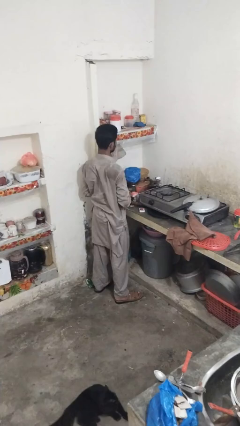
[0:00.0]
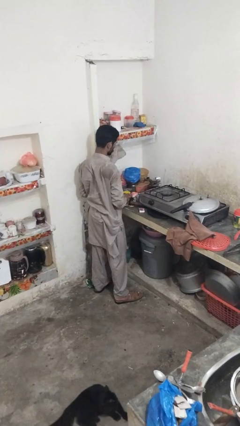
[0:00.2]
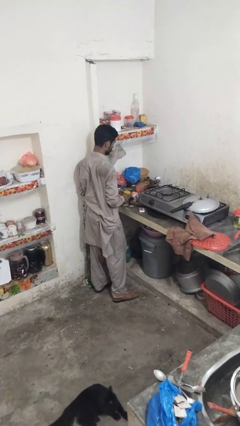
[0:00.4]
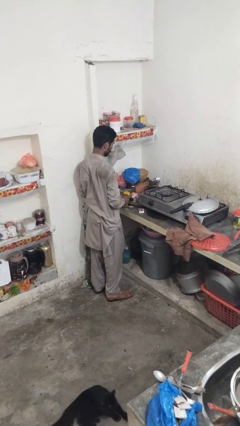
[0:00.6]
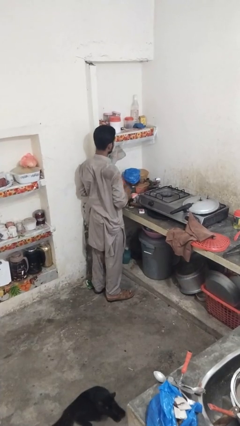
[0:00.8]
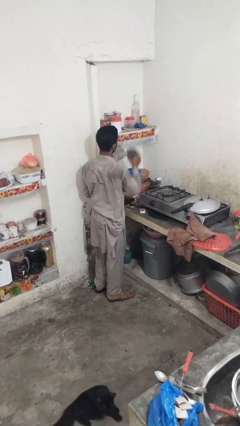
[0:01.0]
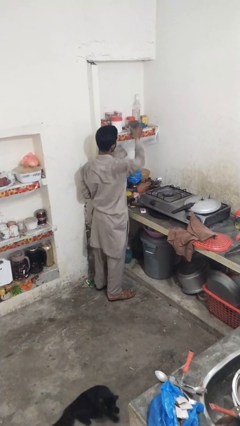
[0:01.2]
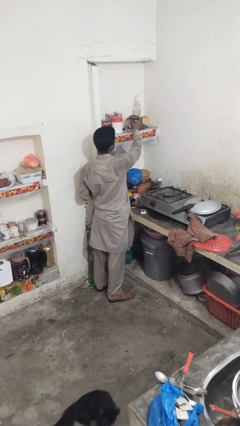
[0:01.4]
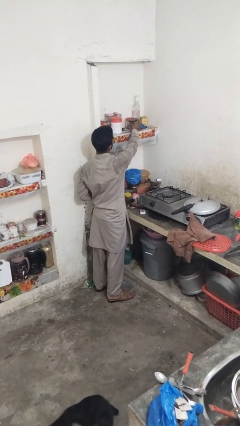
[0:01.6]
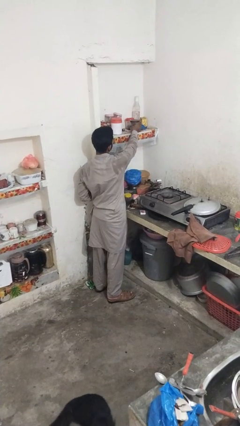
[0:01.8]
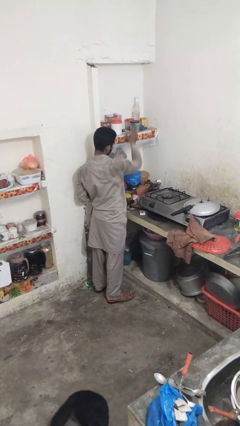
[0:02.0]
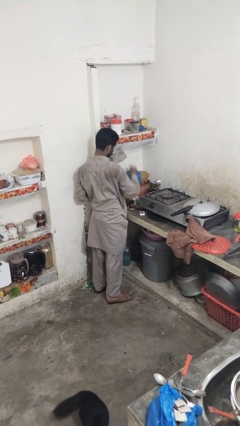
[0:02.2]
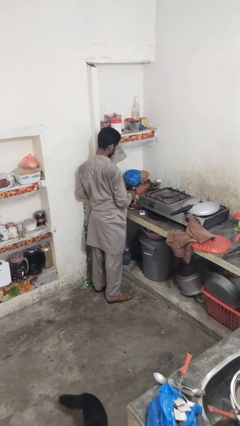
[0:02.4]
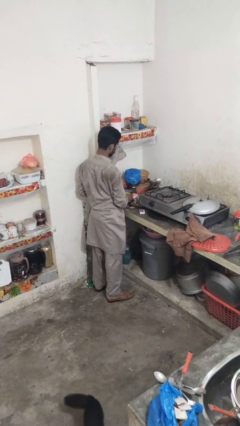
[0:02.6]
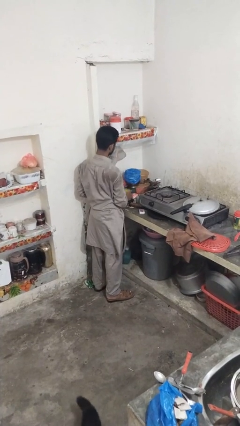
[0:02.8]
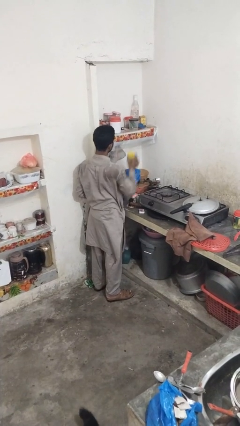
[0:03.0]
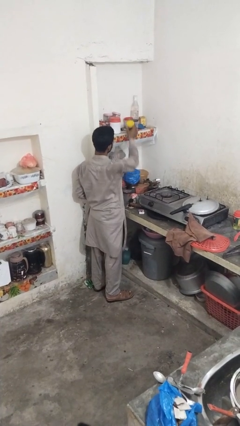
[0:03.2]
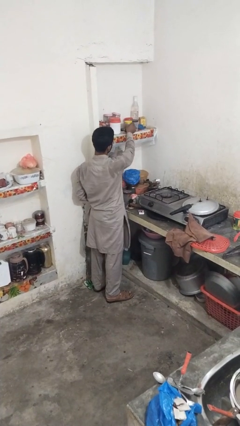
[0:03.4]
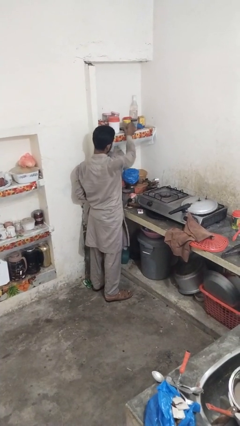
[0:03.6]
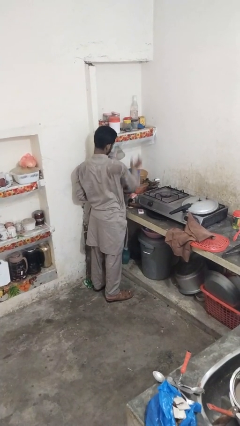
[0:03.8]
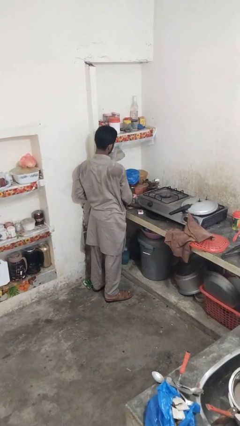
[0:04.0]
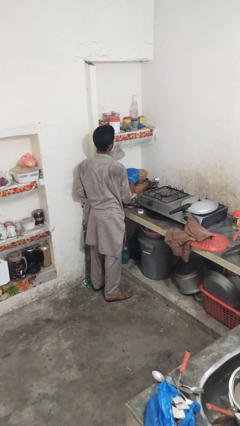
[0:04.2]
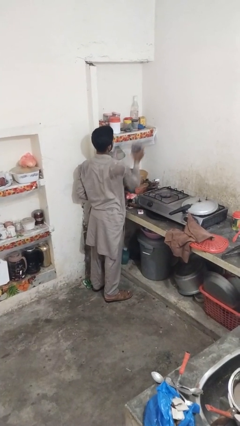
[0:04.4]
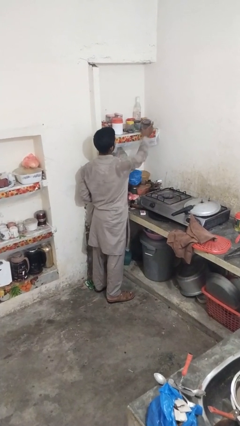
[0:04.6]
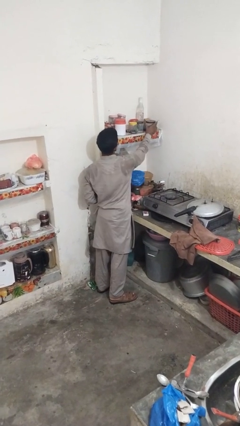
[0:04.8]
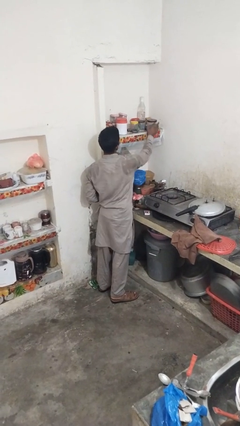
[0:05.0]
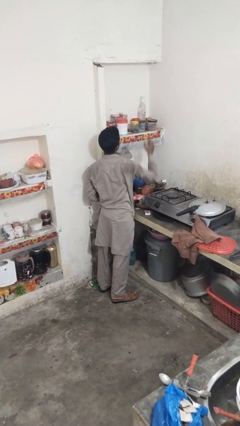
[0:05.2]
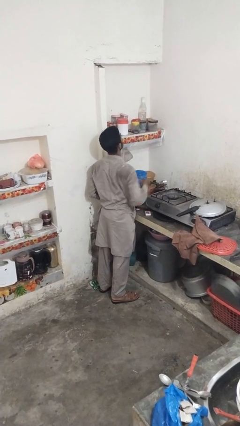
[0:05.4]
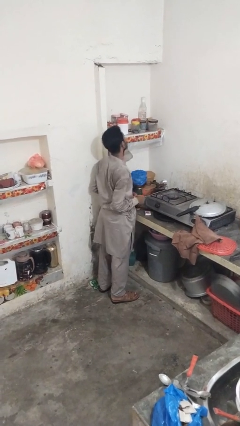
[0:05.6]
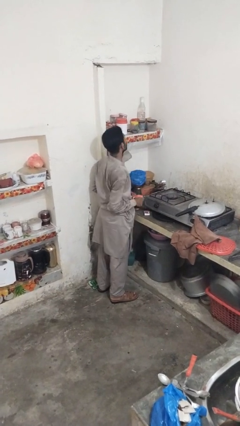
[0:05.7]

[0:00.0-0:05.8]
person loads groceries into cabinet

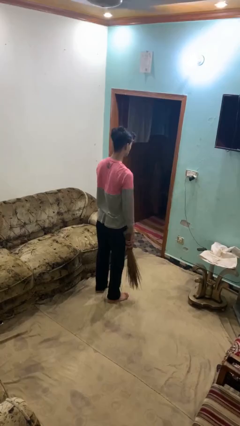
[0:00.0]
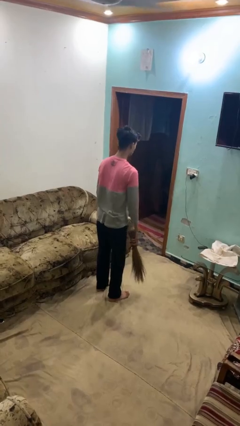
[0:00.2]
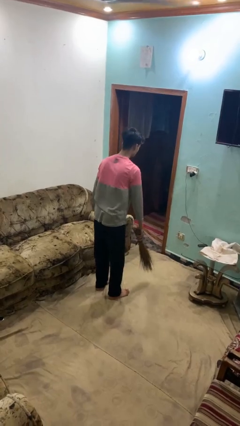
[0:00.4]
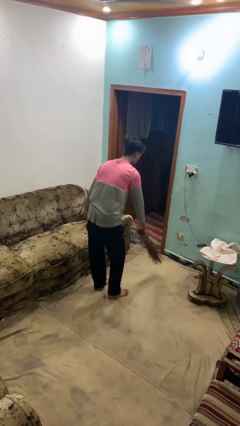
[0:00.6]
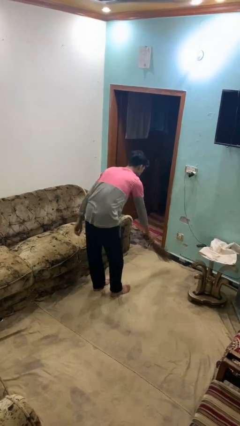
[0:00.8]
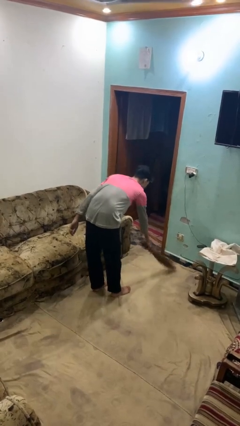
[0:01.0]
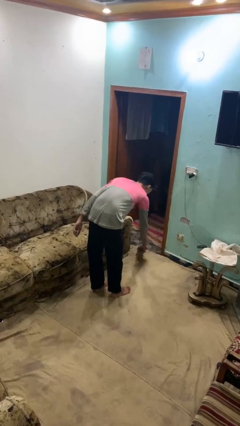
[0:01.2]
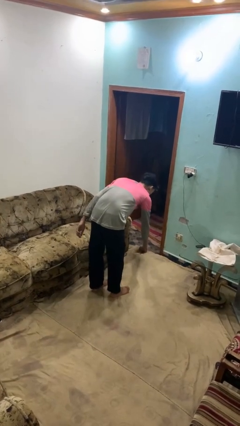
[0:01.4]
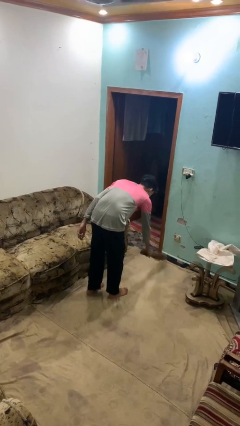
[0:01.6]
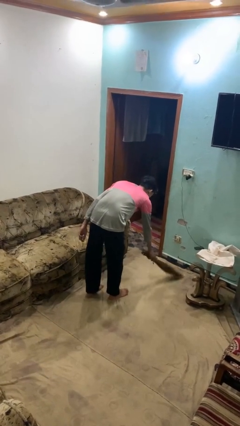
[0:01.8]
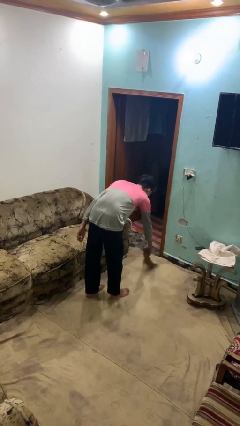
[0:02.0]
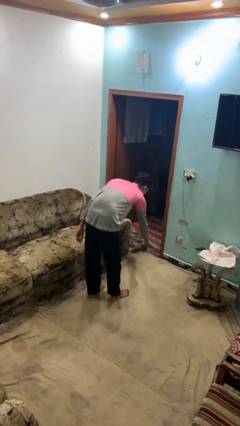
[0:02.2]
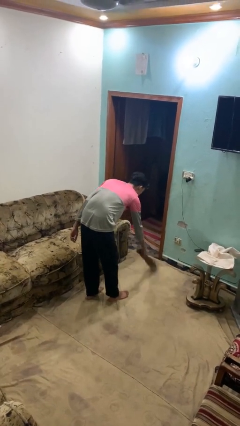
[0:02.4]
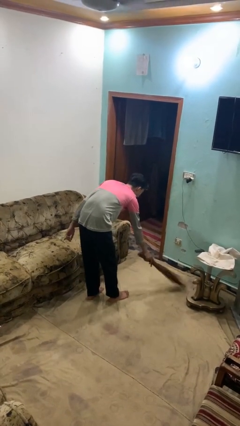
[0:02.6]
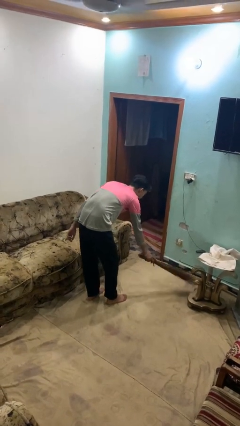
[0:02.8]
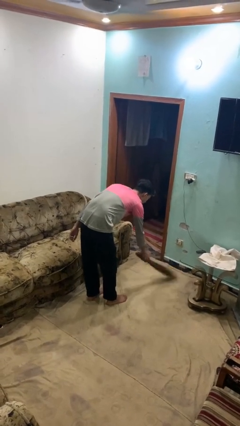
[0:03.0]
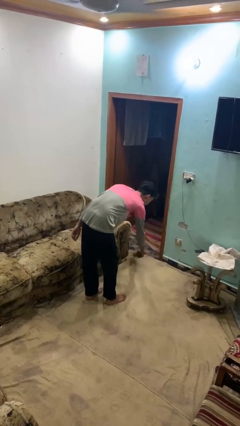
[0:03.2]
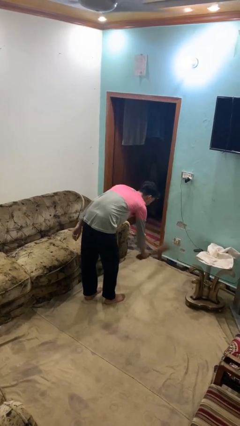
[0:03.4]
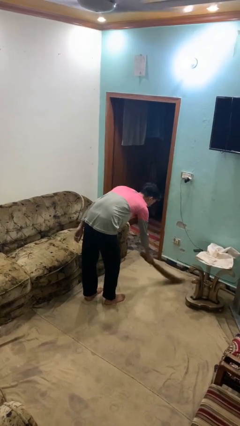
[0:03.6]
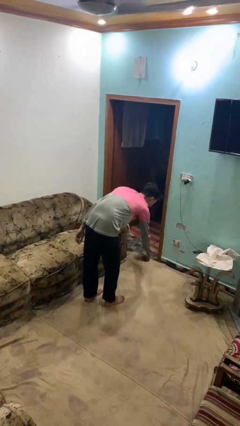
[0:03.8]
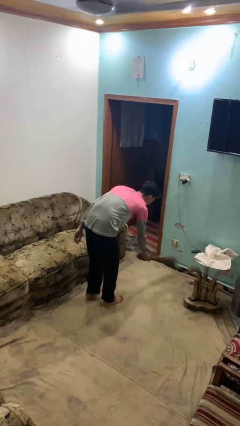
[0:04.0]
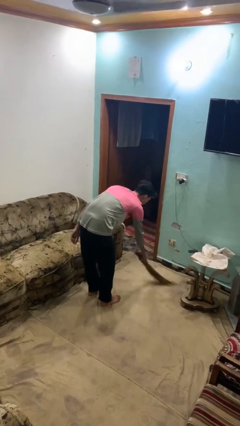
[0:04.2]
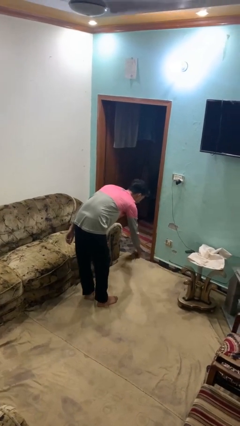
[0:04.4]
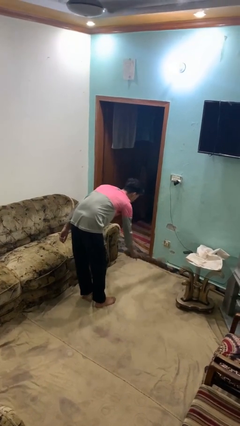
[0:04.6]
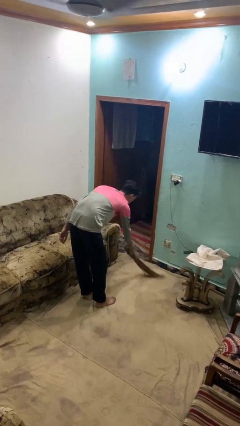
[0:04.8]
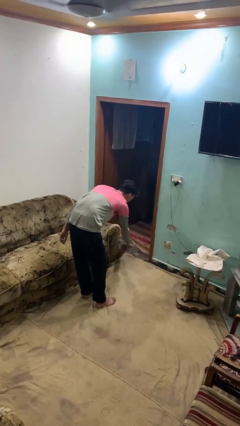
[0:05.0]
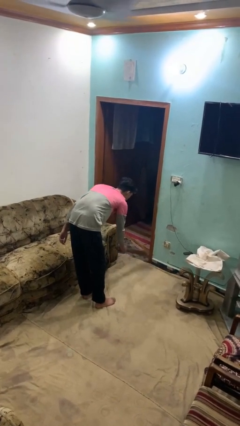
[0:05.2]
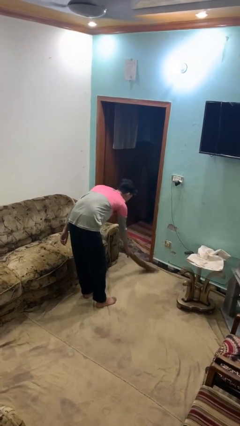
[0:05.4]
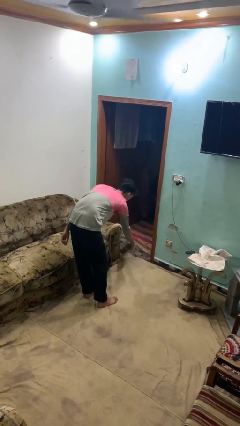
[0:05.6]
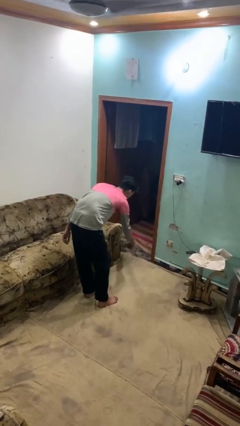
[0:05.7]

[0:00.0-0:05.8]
person sweeps floor

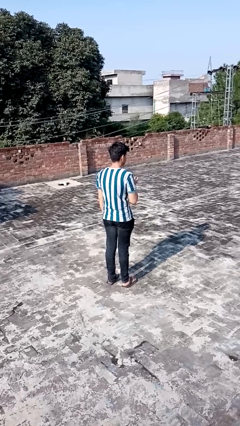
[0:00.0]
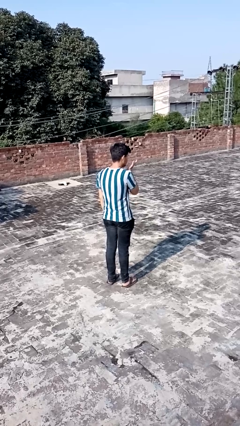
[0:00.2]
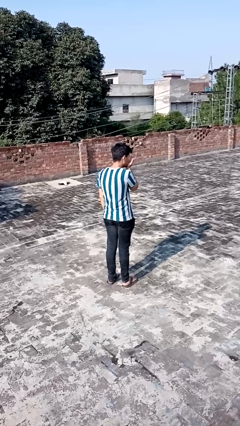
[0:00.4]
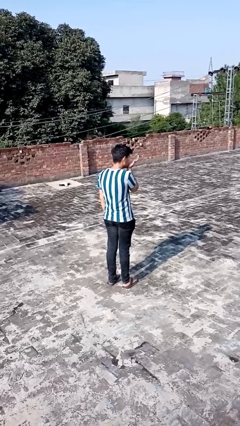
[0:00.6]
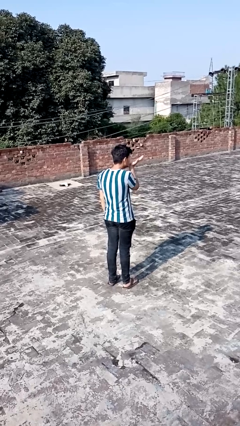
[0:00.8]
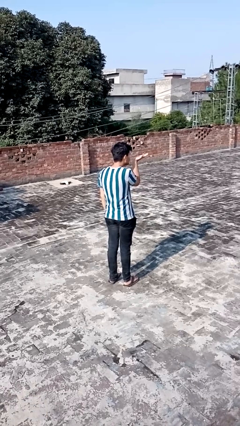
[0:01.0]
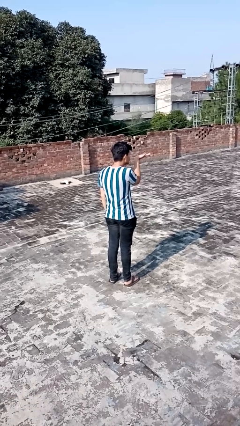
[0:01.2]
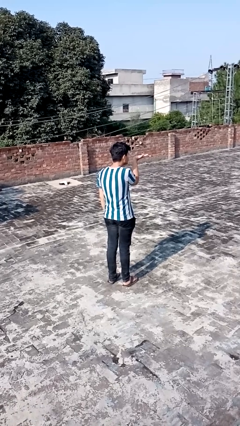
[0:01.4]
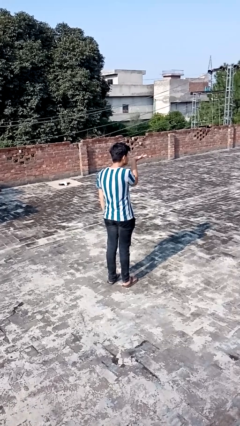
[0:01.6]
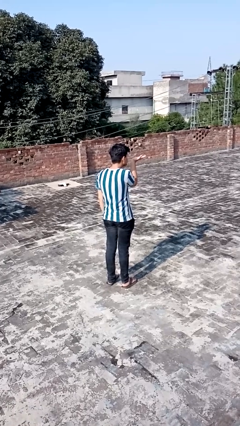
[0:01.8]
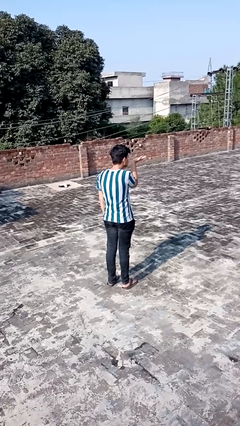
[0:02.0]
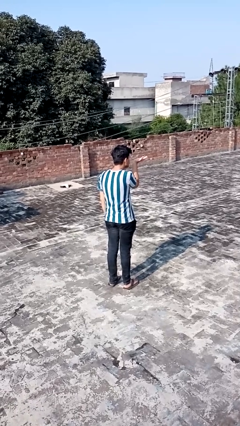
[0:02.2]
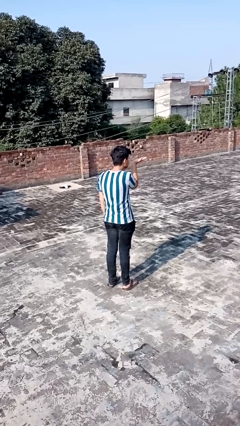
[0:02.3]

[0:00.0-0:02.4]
person gestures blow kiss

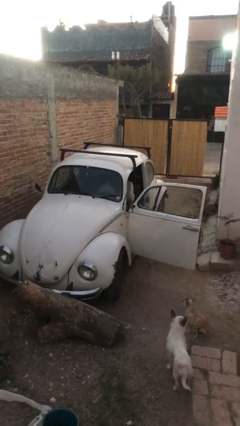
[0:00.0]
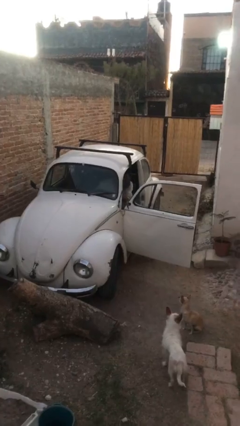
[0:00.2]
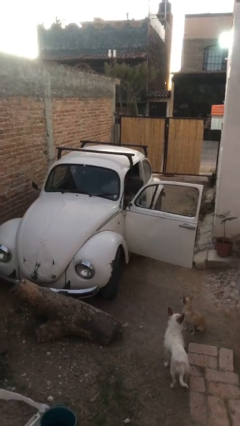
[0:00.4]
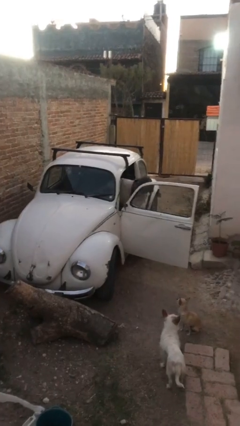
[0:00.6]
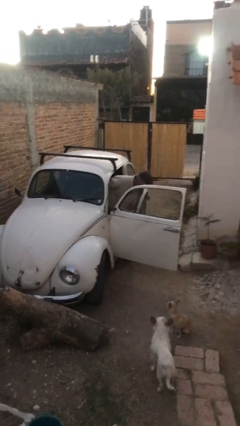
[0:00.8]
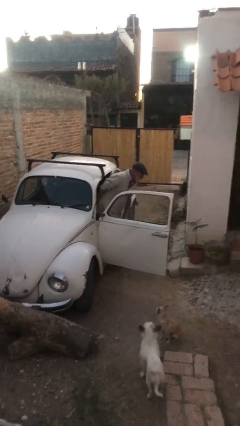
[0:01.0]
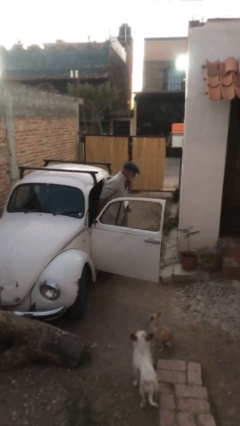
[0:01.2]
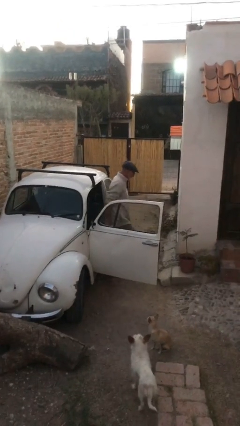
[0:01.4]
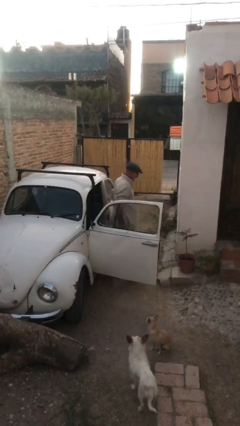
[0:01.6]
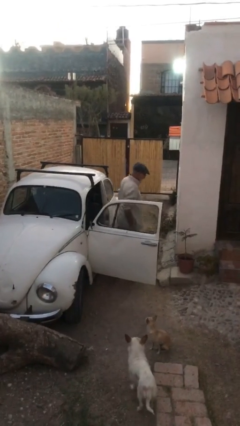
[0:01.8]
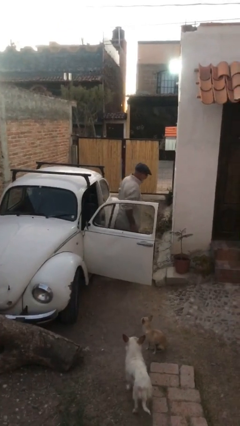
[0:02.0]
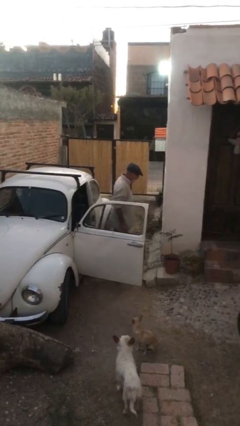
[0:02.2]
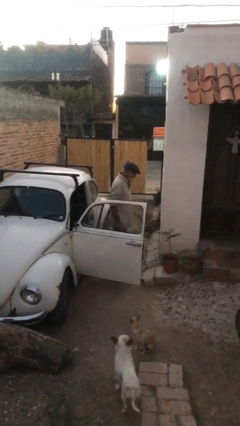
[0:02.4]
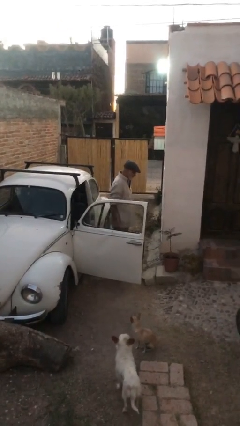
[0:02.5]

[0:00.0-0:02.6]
person exits car

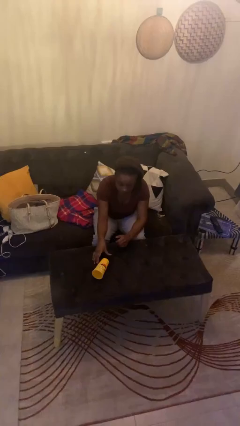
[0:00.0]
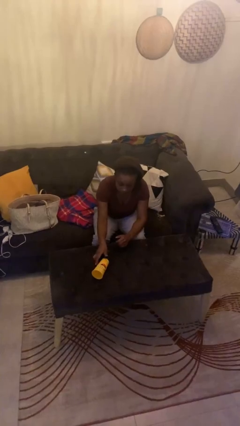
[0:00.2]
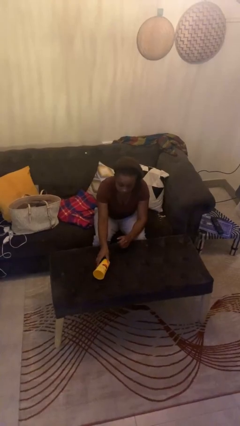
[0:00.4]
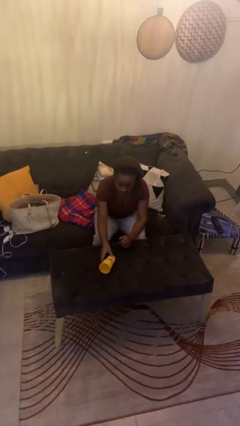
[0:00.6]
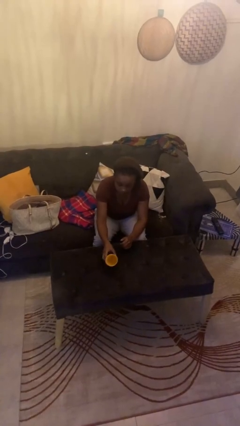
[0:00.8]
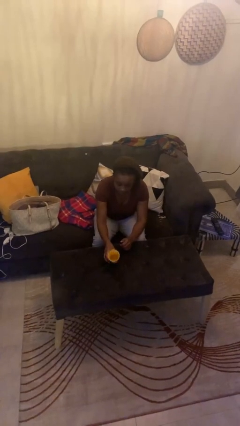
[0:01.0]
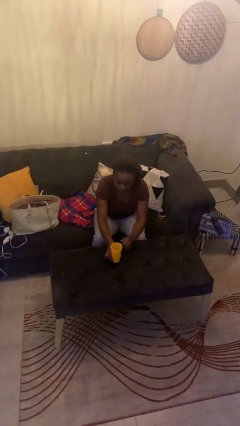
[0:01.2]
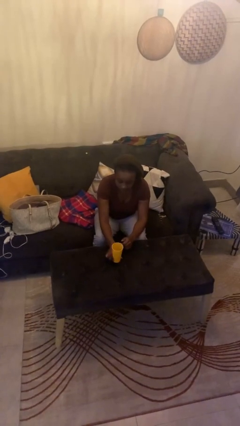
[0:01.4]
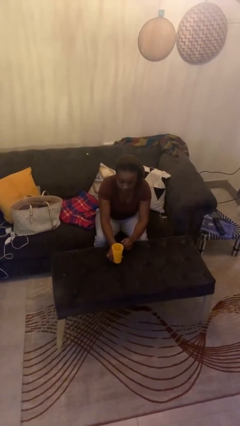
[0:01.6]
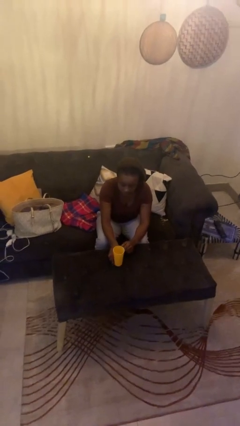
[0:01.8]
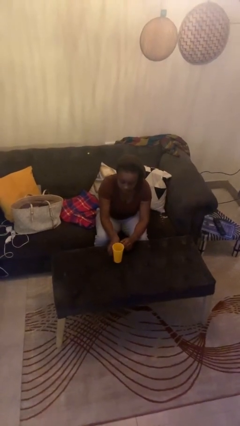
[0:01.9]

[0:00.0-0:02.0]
person sets upright glass
